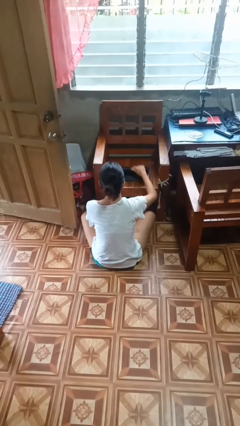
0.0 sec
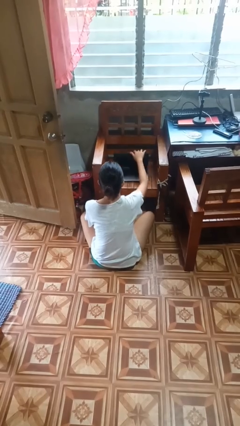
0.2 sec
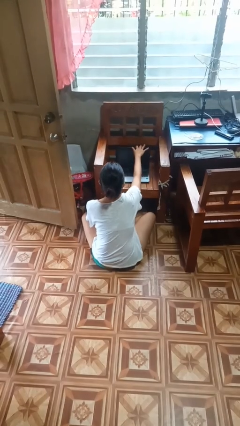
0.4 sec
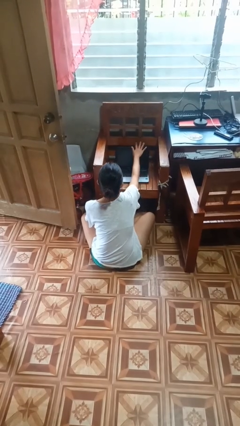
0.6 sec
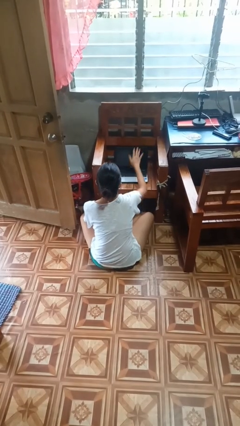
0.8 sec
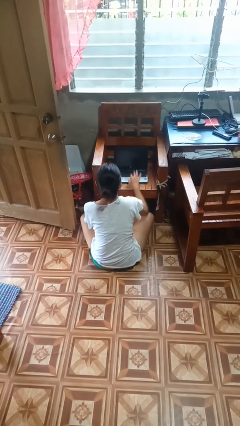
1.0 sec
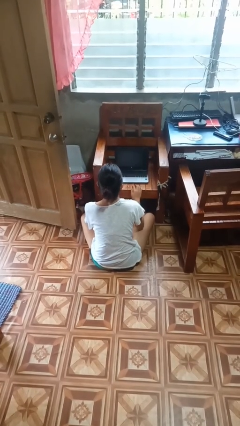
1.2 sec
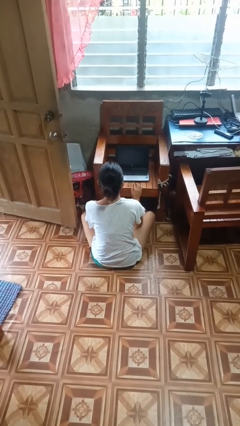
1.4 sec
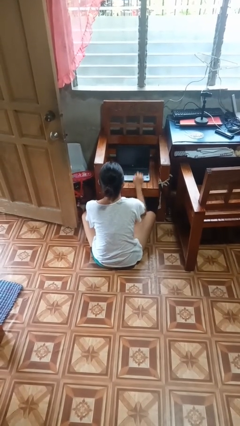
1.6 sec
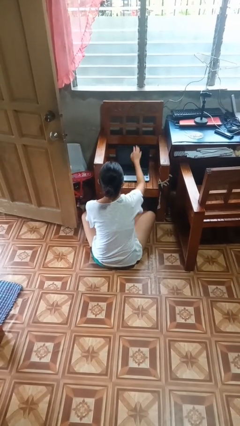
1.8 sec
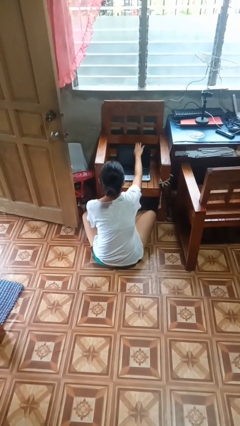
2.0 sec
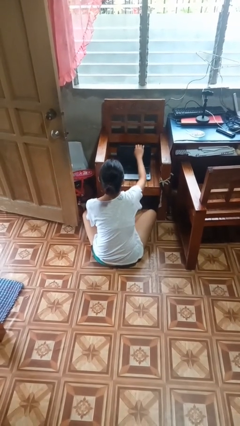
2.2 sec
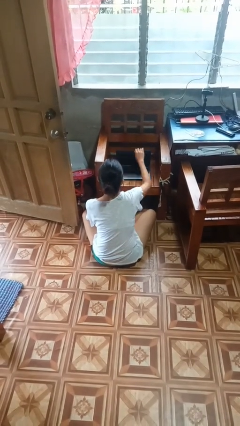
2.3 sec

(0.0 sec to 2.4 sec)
person opens laptop

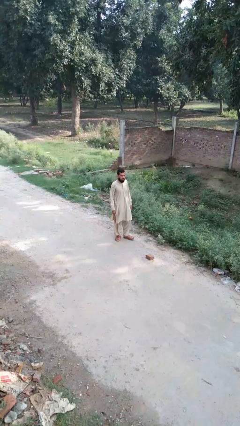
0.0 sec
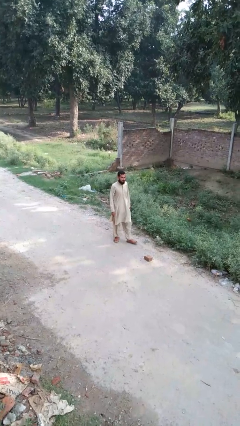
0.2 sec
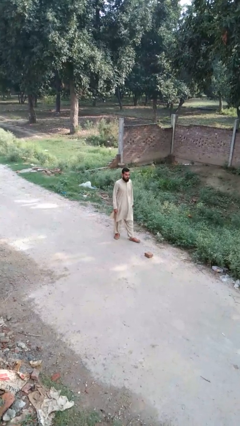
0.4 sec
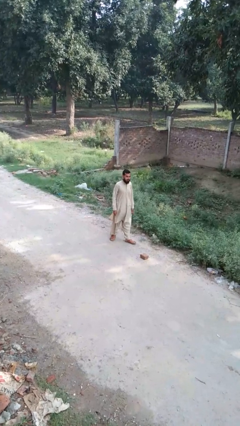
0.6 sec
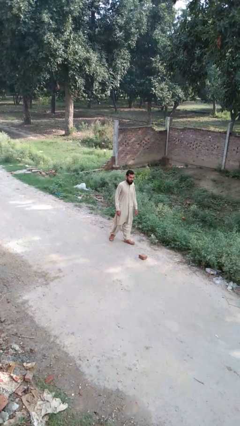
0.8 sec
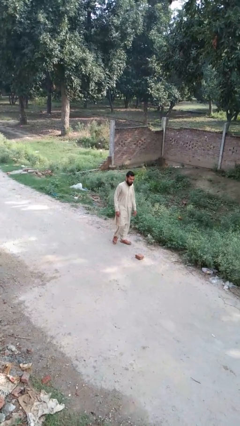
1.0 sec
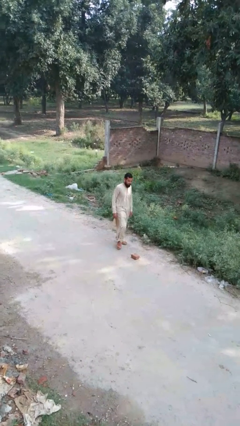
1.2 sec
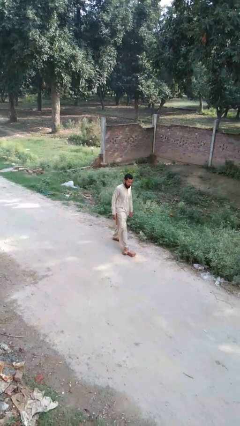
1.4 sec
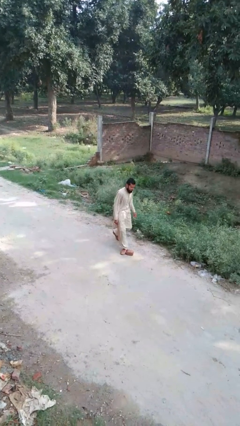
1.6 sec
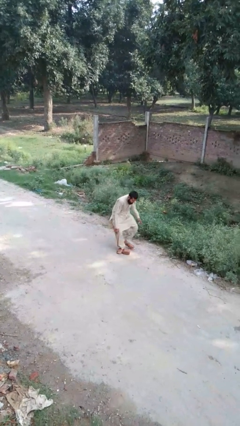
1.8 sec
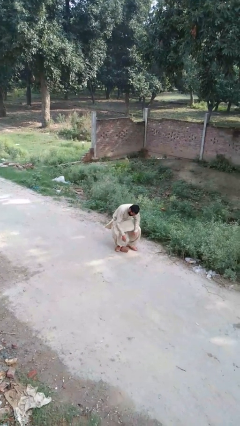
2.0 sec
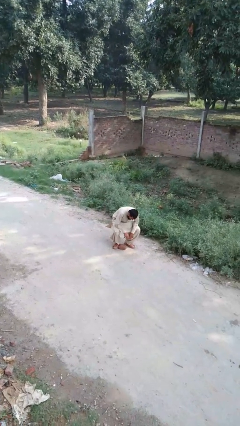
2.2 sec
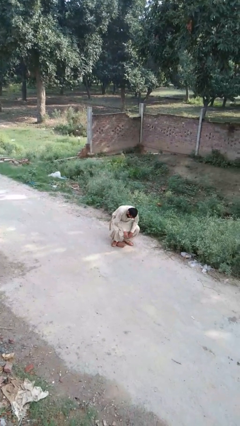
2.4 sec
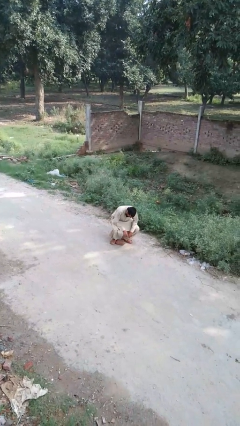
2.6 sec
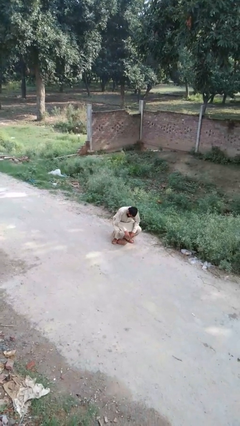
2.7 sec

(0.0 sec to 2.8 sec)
person trips on object on floor

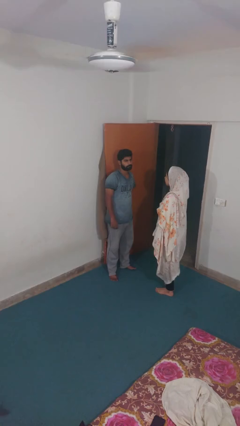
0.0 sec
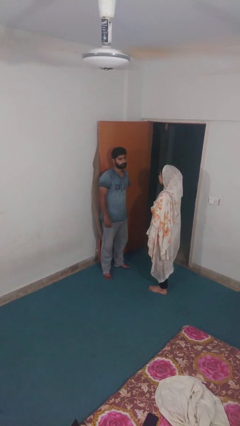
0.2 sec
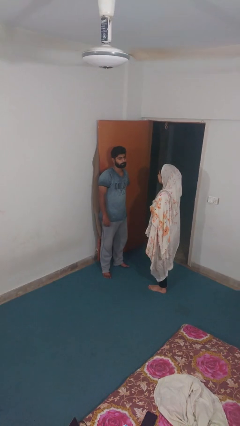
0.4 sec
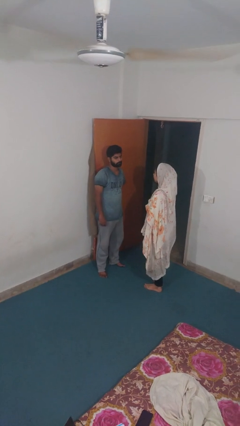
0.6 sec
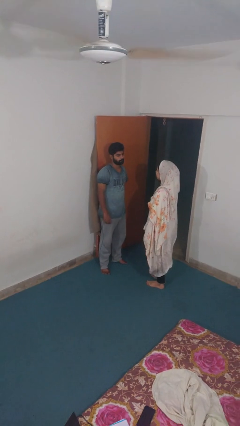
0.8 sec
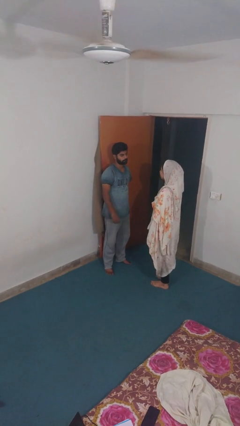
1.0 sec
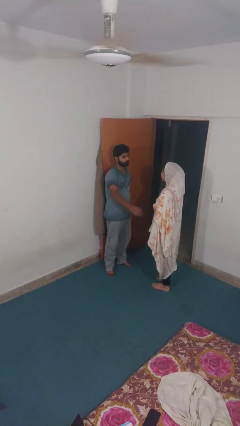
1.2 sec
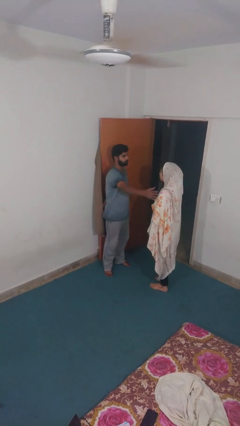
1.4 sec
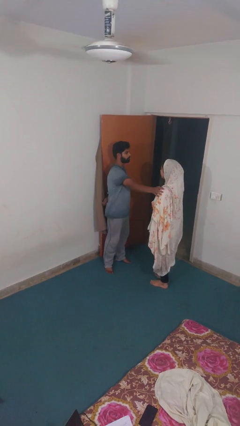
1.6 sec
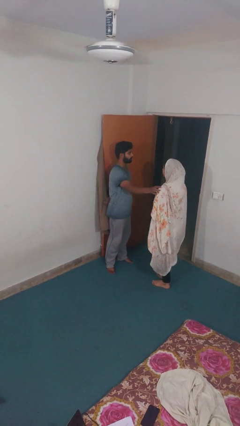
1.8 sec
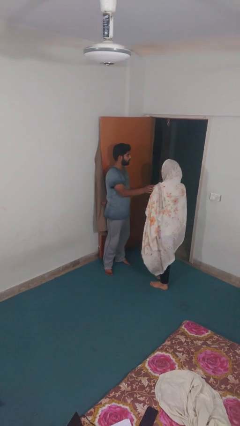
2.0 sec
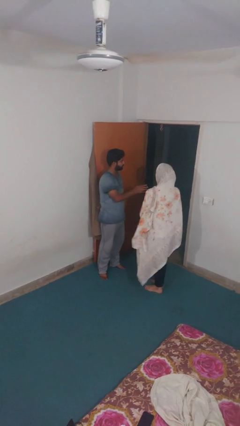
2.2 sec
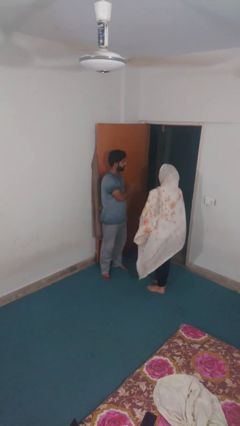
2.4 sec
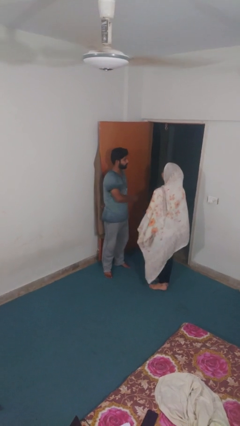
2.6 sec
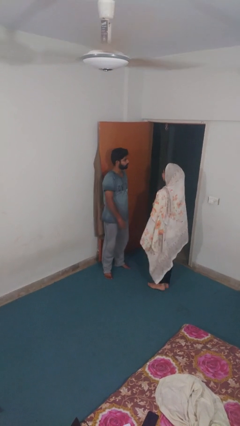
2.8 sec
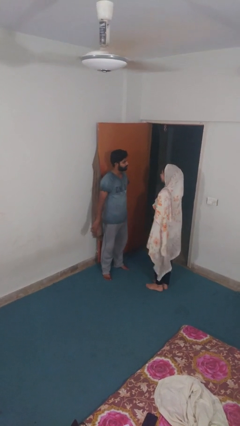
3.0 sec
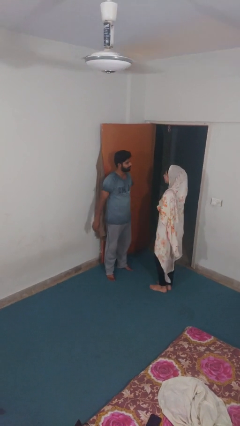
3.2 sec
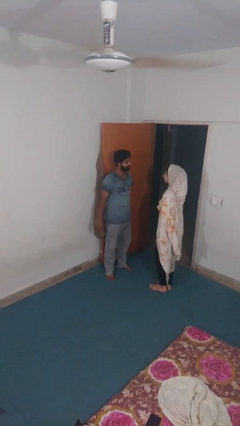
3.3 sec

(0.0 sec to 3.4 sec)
person shoves person

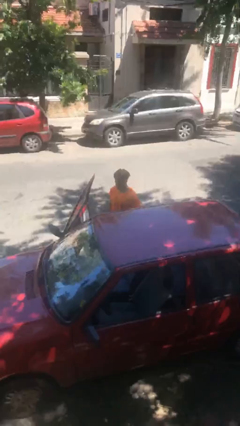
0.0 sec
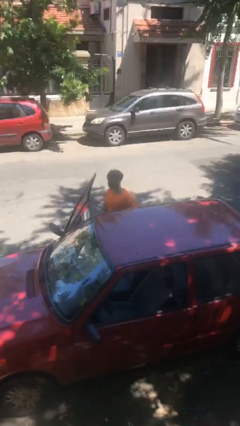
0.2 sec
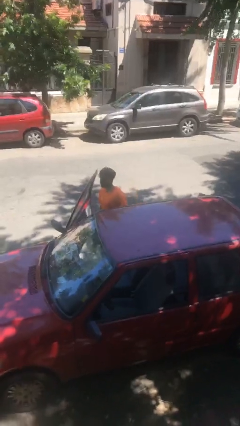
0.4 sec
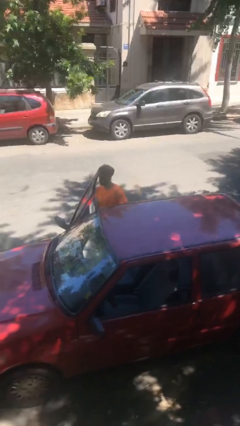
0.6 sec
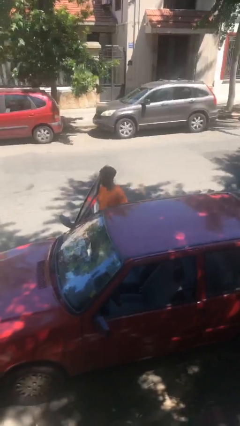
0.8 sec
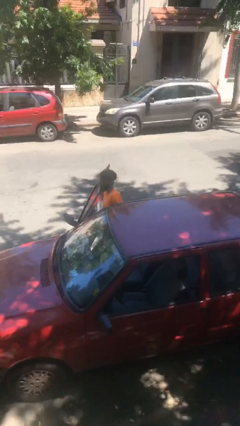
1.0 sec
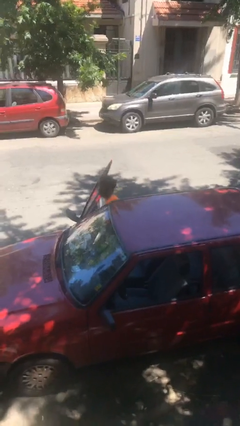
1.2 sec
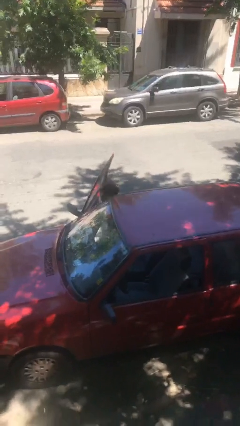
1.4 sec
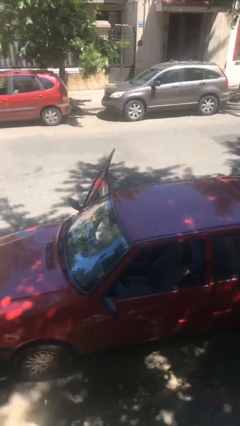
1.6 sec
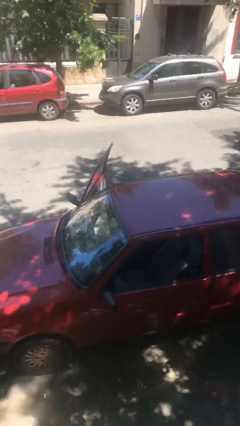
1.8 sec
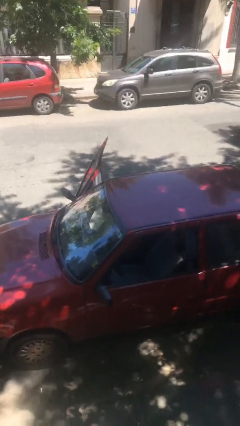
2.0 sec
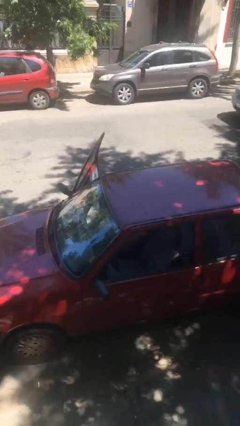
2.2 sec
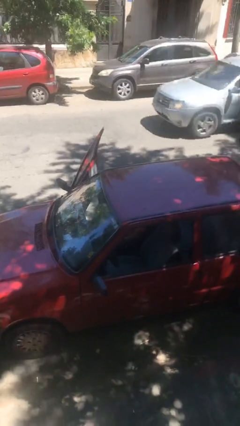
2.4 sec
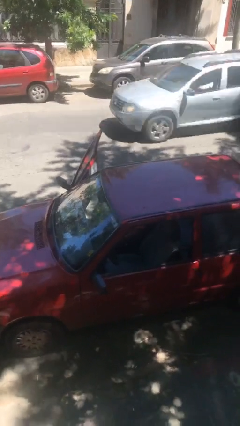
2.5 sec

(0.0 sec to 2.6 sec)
person enters car

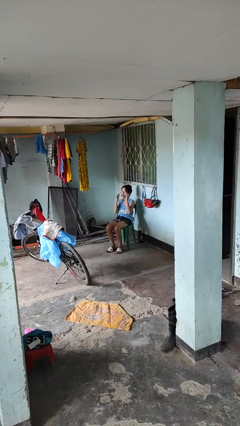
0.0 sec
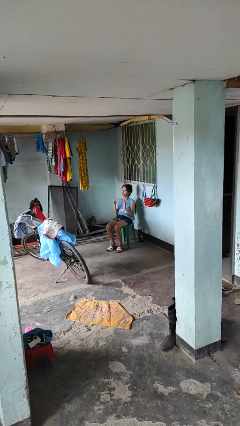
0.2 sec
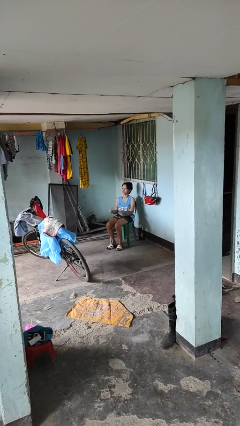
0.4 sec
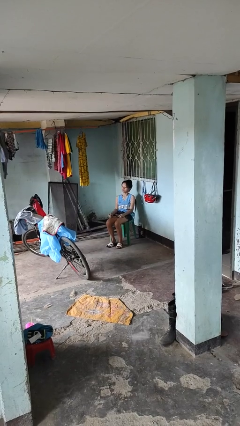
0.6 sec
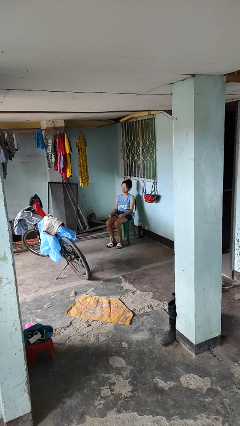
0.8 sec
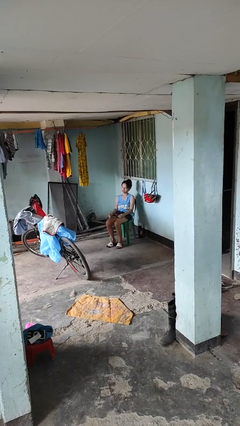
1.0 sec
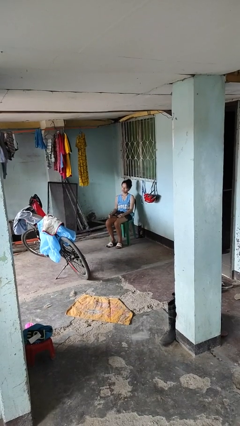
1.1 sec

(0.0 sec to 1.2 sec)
person takes off glasses

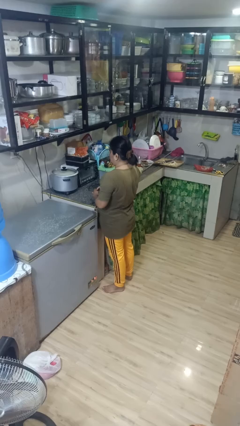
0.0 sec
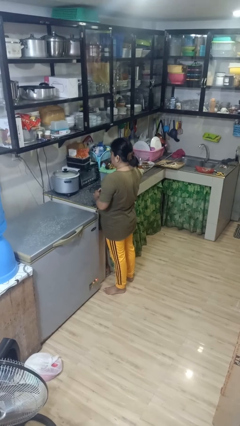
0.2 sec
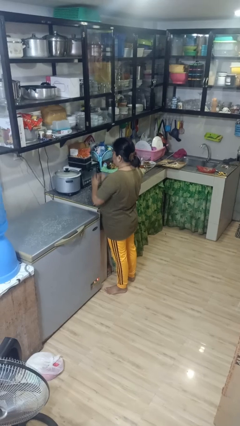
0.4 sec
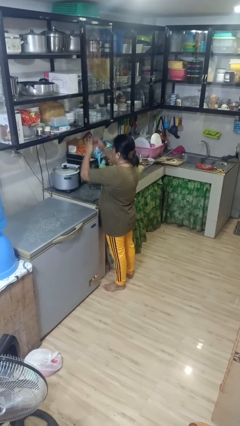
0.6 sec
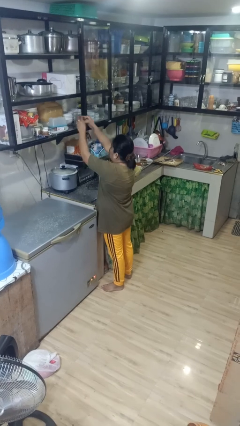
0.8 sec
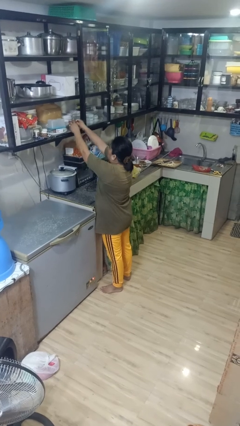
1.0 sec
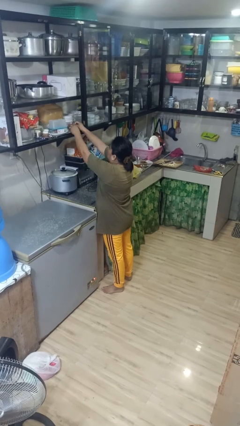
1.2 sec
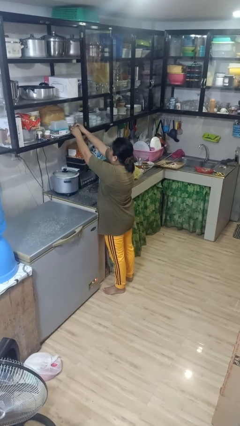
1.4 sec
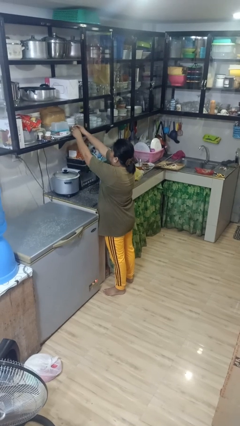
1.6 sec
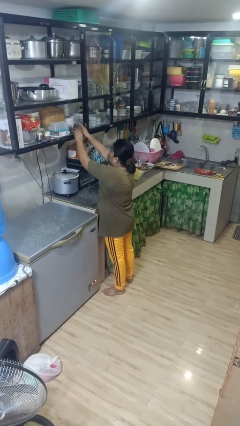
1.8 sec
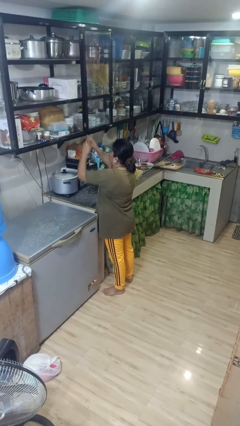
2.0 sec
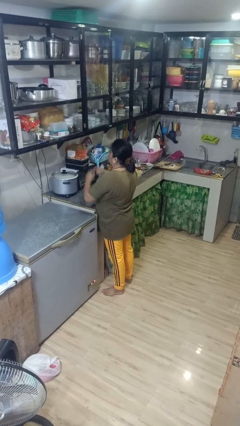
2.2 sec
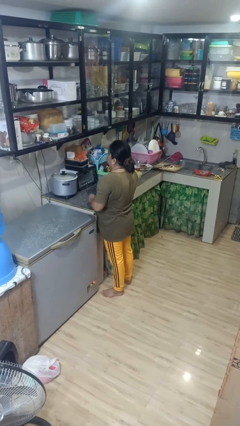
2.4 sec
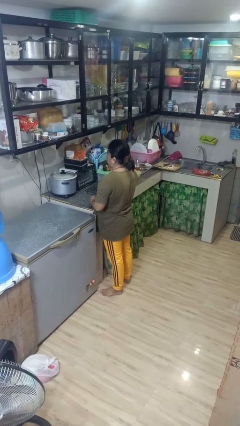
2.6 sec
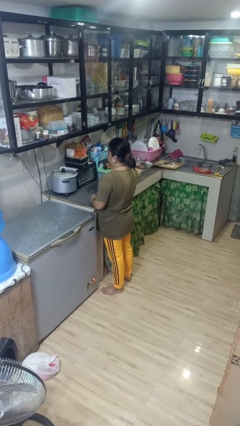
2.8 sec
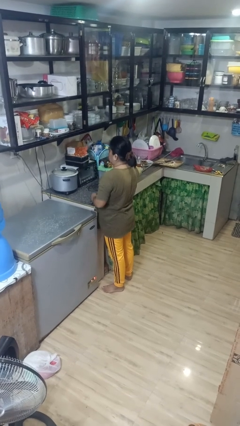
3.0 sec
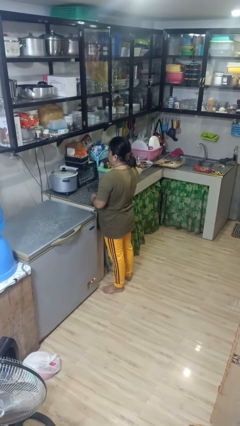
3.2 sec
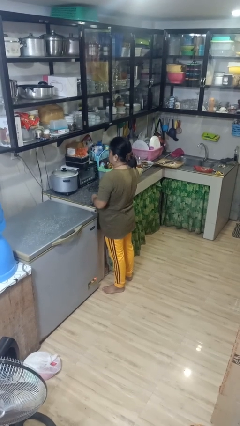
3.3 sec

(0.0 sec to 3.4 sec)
person puts object in cabinet

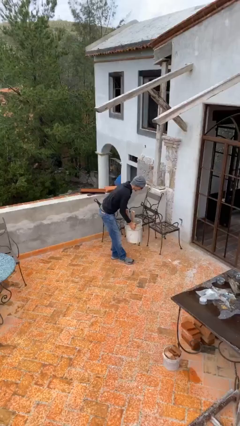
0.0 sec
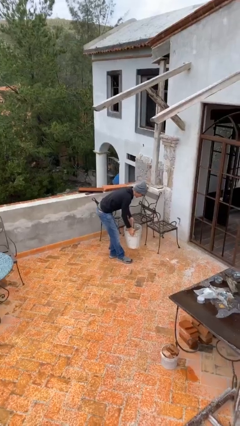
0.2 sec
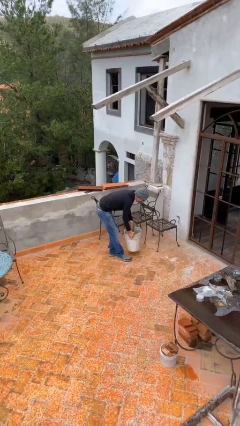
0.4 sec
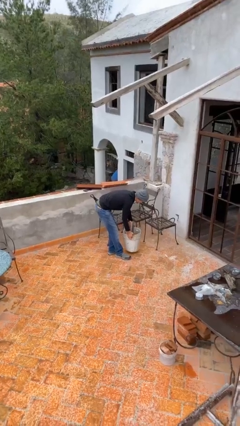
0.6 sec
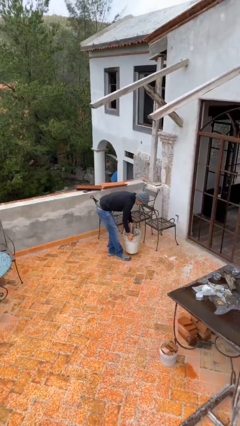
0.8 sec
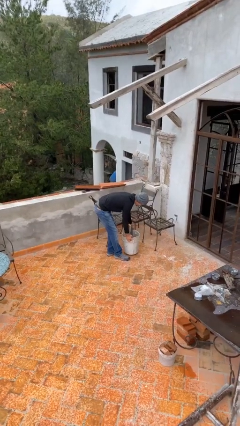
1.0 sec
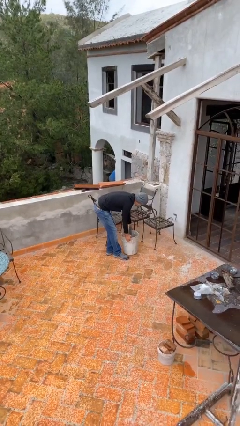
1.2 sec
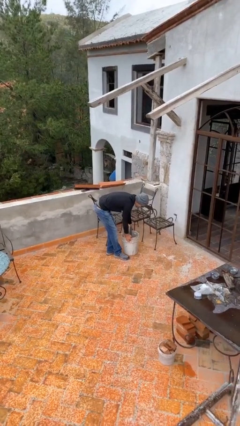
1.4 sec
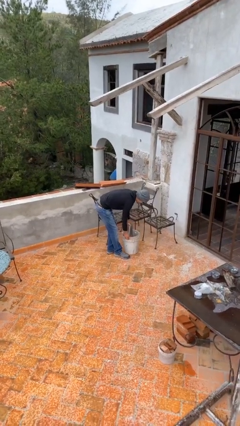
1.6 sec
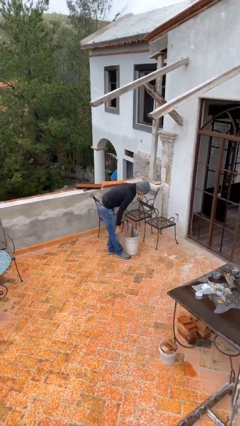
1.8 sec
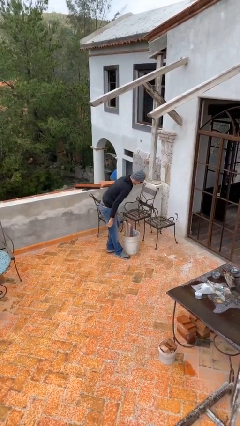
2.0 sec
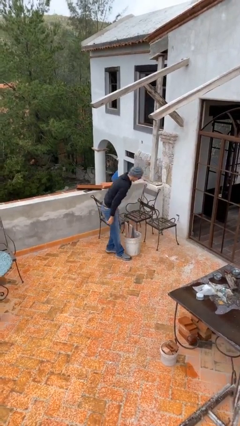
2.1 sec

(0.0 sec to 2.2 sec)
person puts down object on floor
